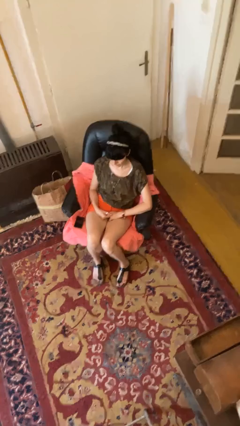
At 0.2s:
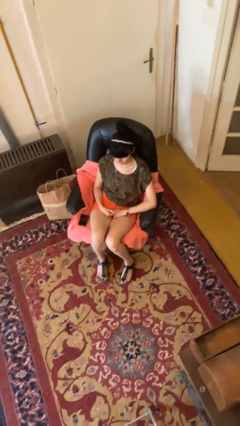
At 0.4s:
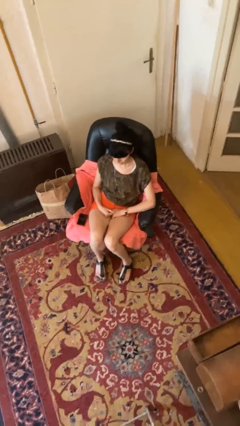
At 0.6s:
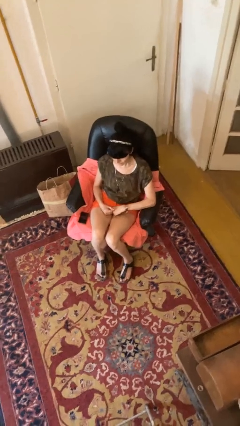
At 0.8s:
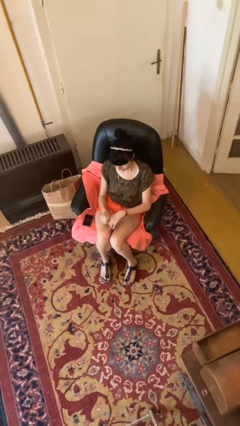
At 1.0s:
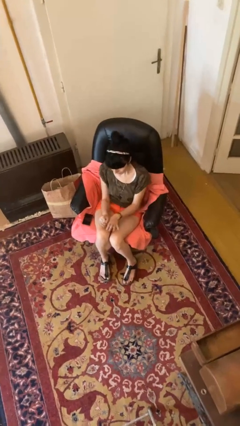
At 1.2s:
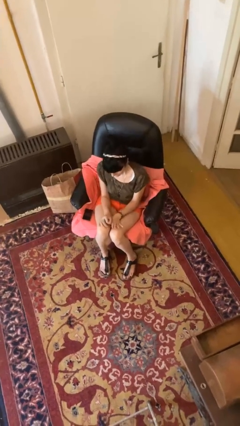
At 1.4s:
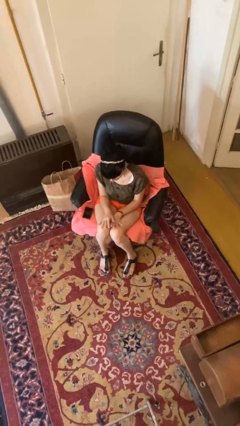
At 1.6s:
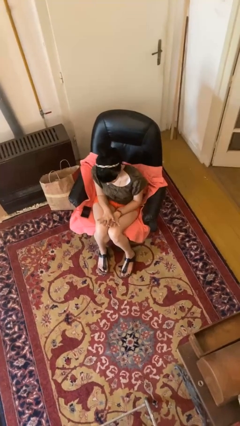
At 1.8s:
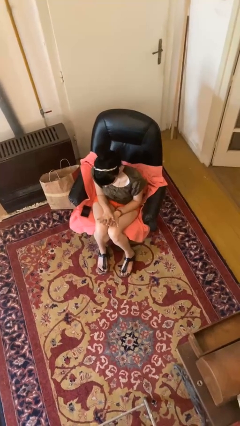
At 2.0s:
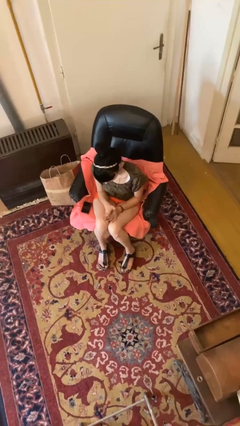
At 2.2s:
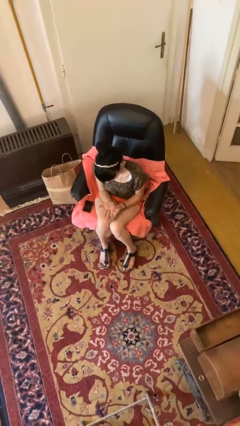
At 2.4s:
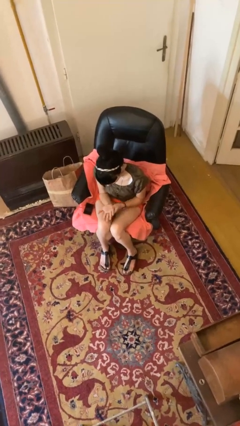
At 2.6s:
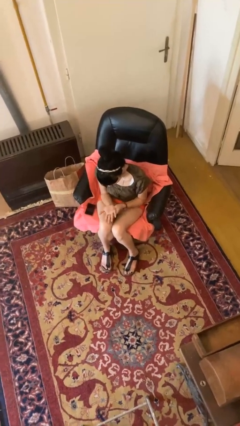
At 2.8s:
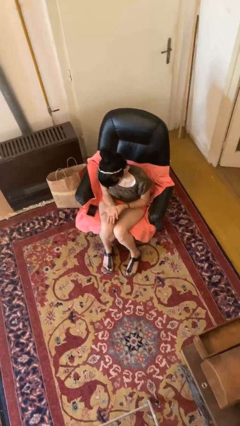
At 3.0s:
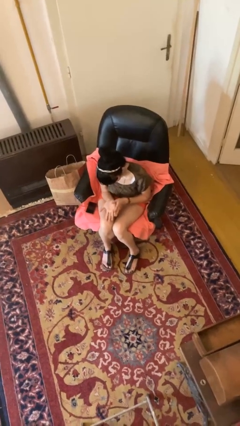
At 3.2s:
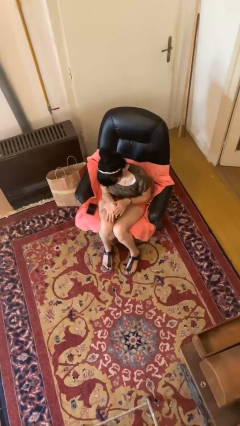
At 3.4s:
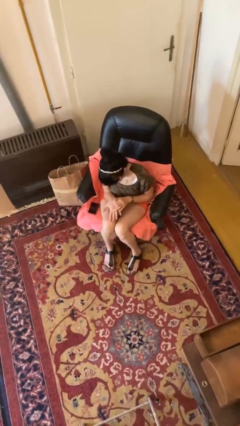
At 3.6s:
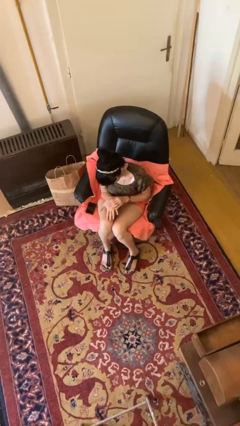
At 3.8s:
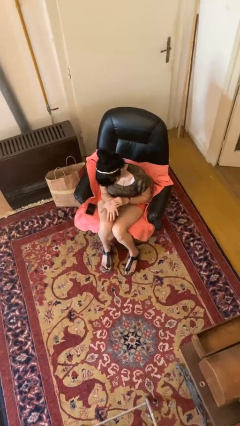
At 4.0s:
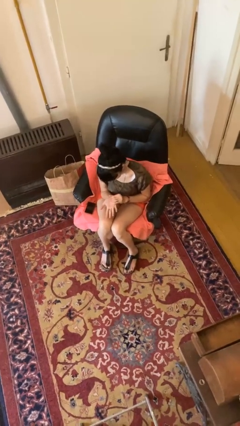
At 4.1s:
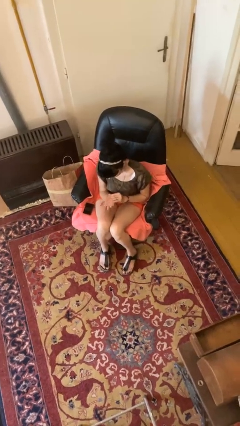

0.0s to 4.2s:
person looks at hands in lap

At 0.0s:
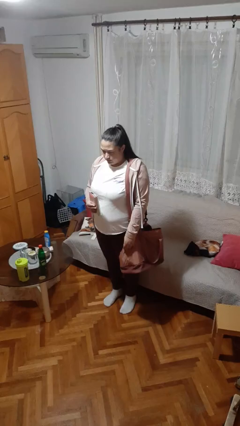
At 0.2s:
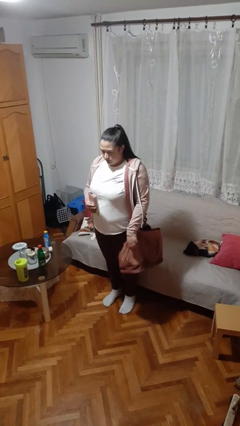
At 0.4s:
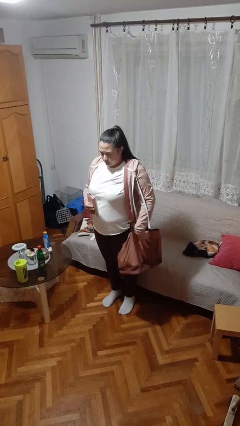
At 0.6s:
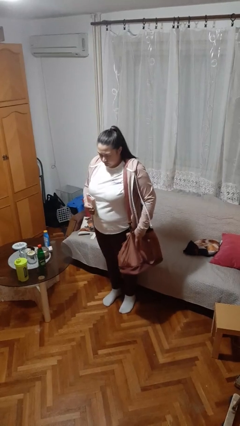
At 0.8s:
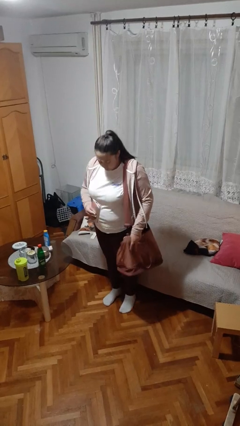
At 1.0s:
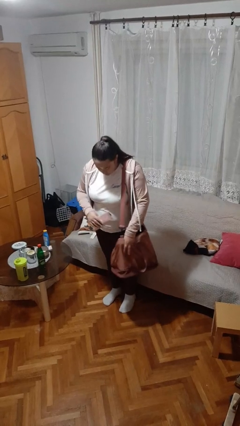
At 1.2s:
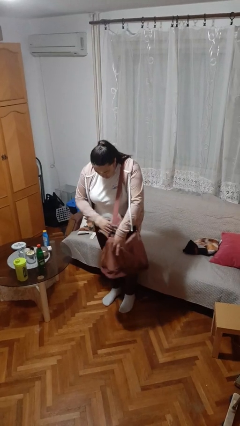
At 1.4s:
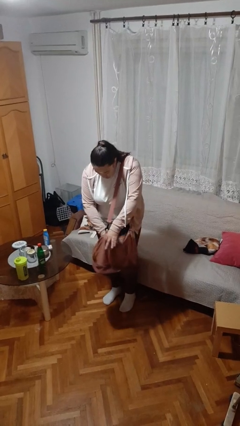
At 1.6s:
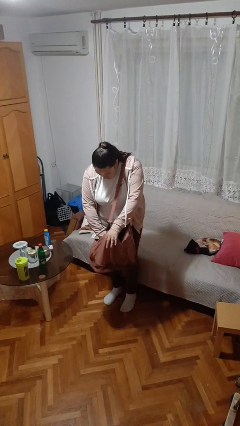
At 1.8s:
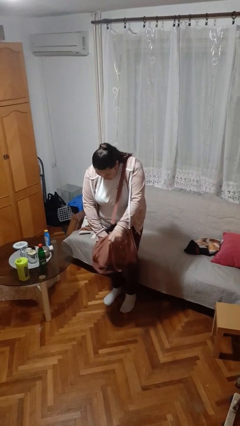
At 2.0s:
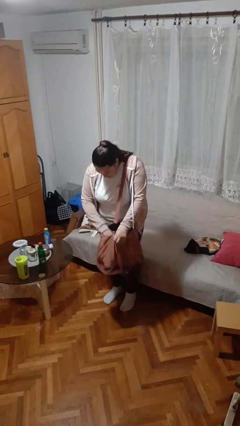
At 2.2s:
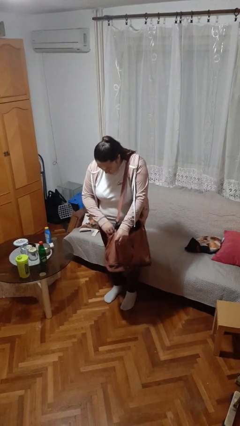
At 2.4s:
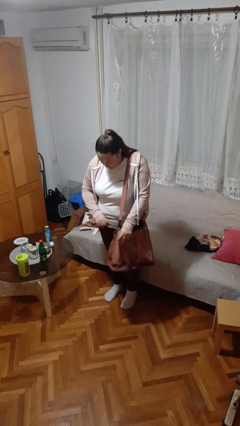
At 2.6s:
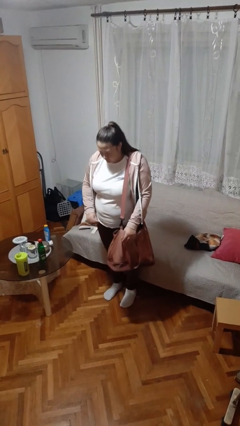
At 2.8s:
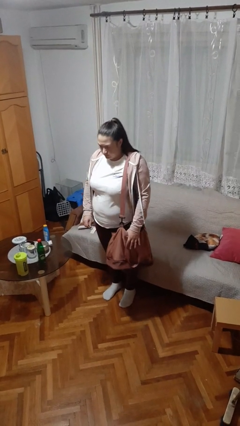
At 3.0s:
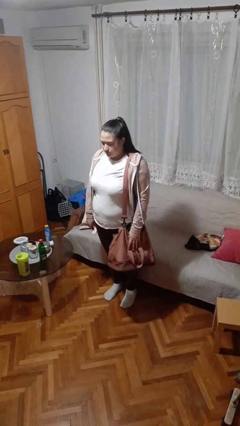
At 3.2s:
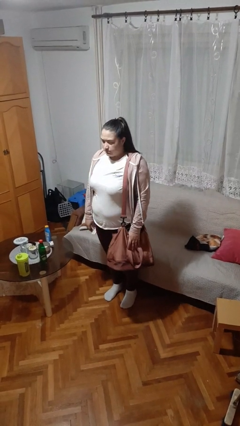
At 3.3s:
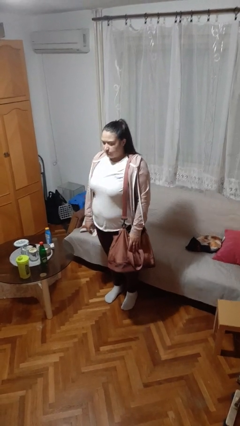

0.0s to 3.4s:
person puts object into purse

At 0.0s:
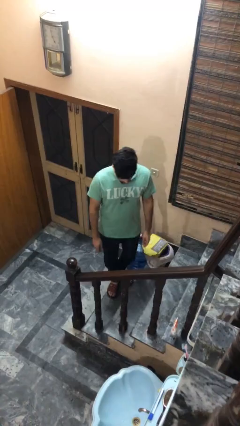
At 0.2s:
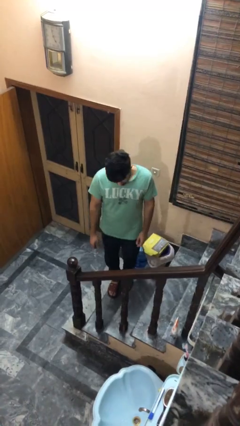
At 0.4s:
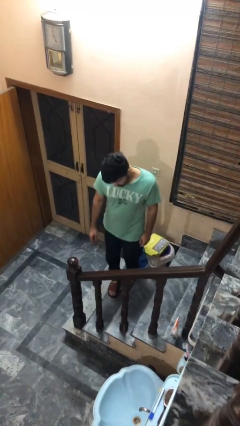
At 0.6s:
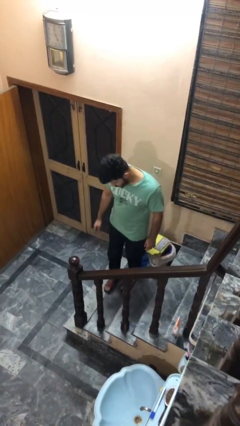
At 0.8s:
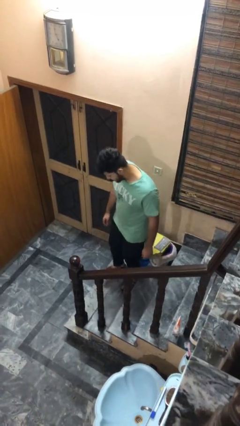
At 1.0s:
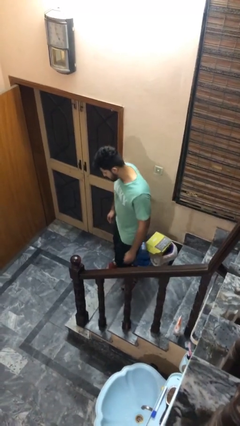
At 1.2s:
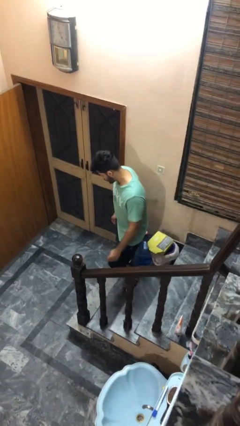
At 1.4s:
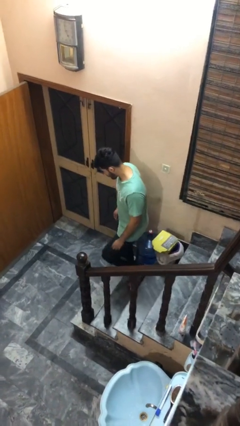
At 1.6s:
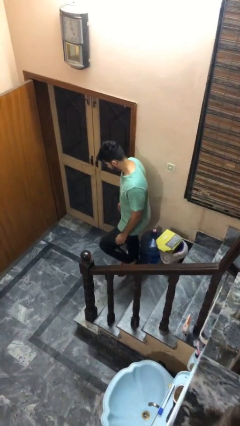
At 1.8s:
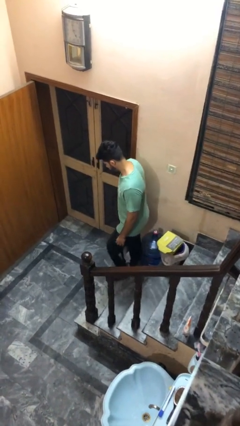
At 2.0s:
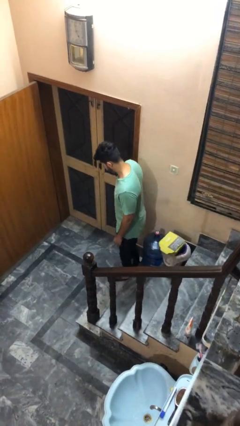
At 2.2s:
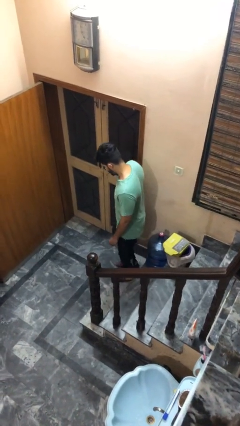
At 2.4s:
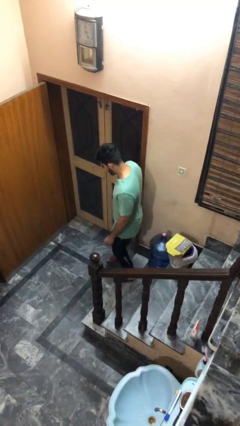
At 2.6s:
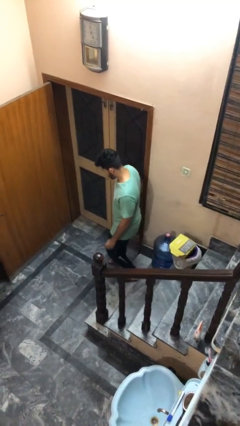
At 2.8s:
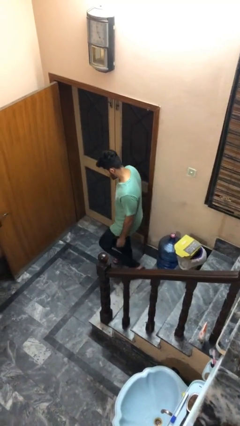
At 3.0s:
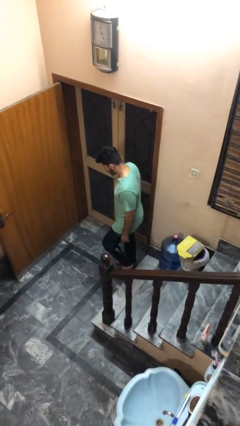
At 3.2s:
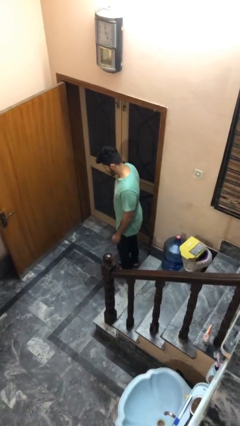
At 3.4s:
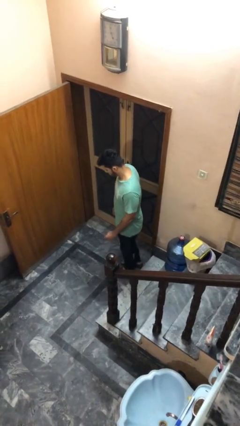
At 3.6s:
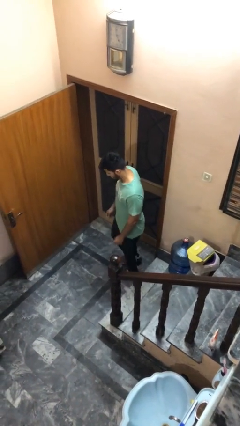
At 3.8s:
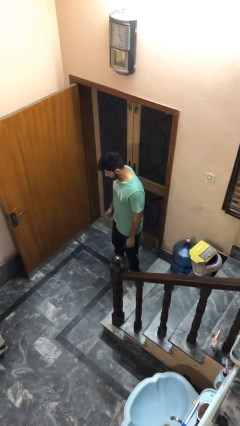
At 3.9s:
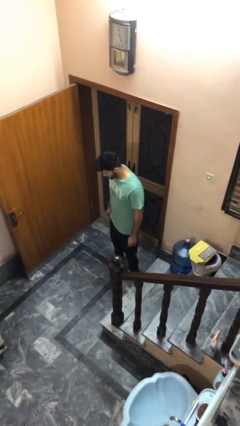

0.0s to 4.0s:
person climbs down stairs

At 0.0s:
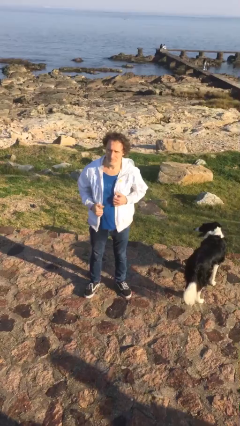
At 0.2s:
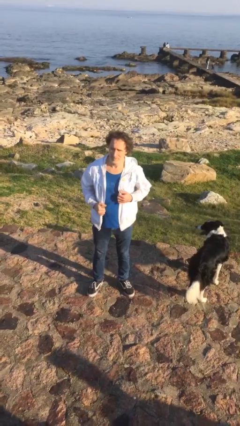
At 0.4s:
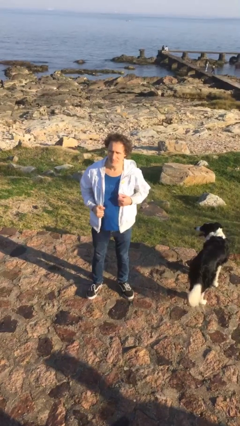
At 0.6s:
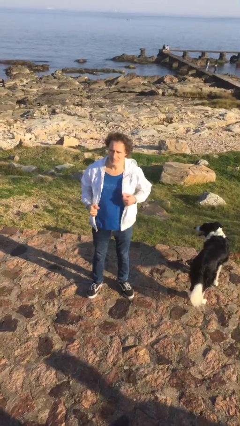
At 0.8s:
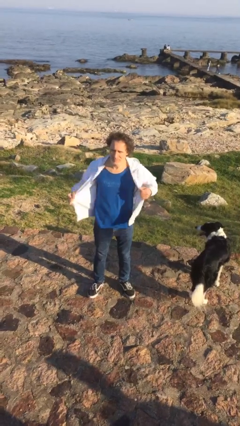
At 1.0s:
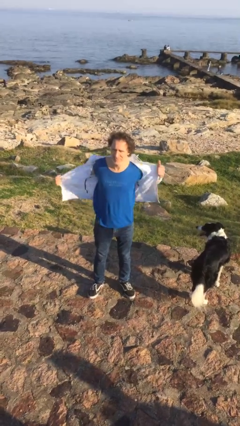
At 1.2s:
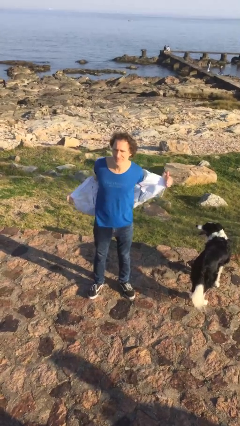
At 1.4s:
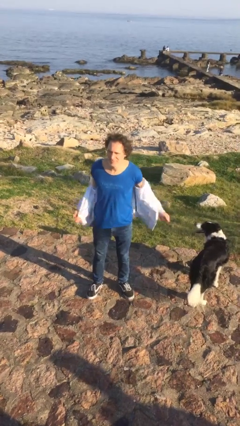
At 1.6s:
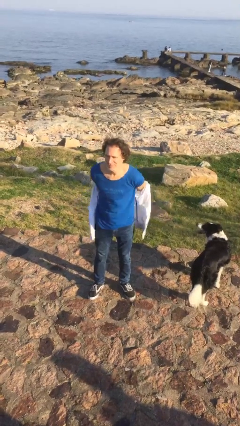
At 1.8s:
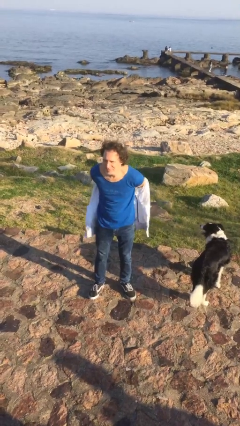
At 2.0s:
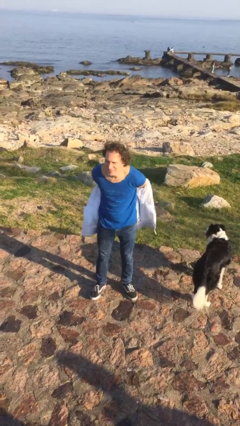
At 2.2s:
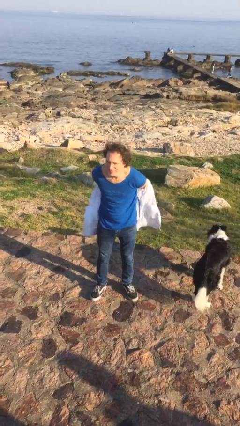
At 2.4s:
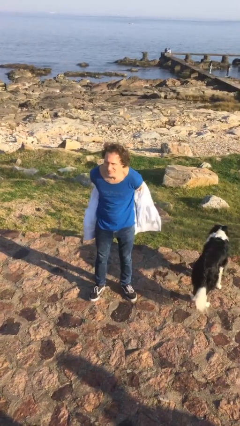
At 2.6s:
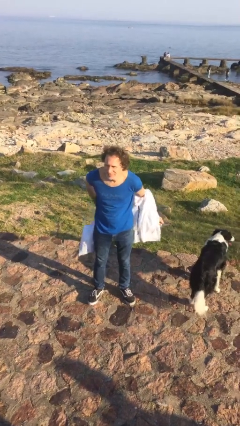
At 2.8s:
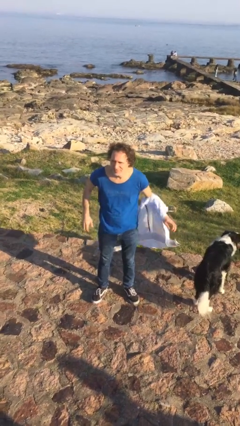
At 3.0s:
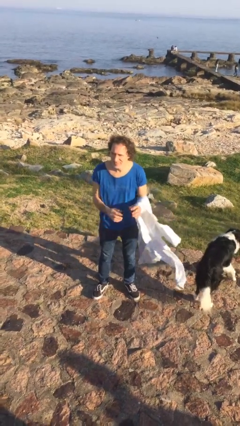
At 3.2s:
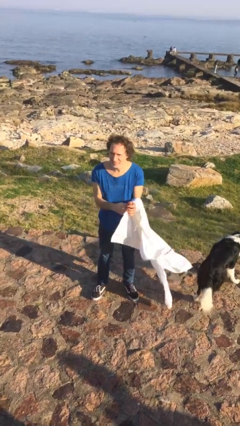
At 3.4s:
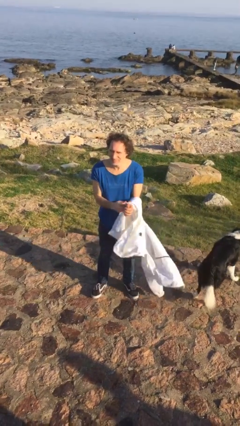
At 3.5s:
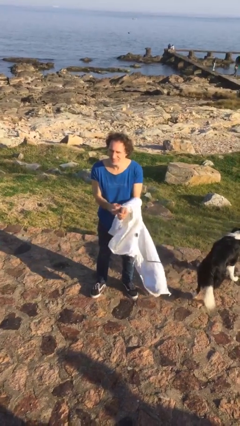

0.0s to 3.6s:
person takes off jacket

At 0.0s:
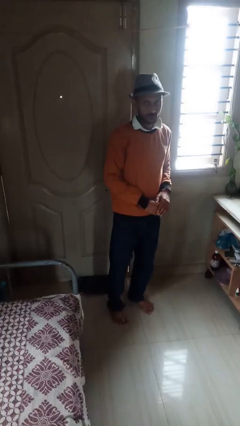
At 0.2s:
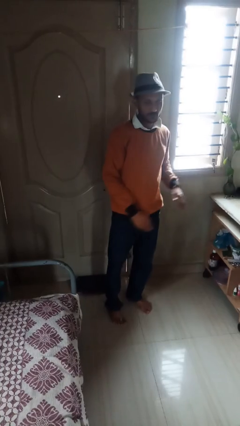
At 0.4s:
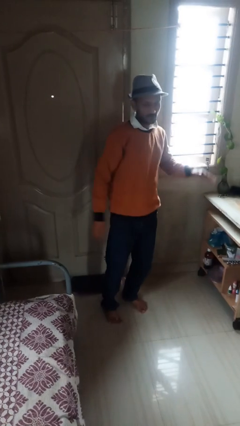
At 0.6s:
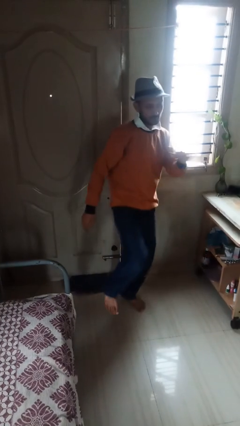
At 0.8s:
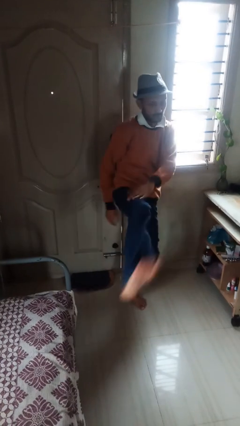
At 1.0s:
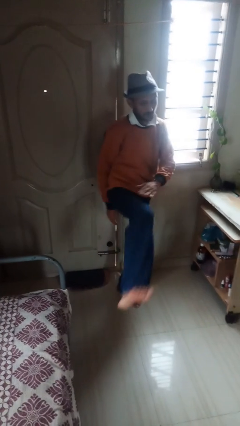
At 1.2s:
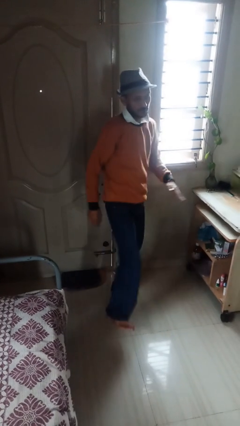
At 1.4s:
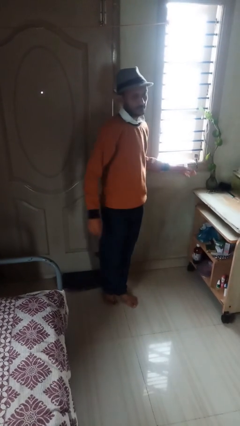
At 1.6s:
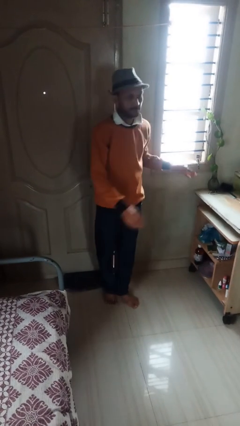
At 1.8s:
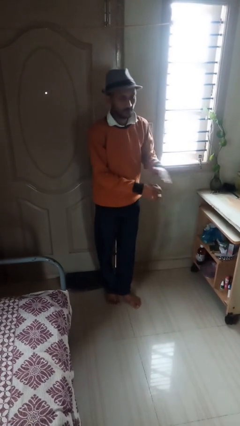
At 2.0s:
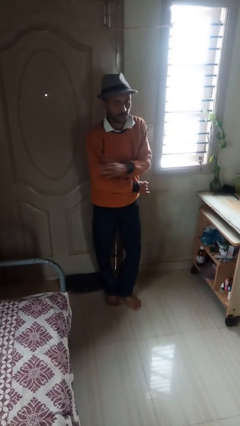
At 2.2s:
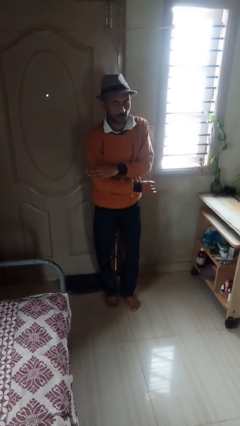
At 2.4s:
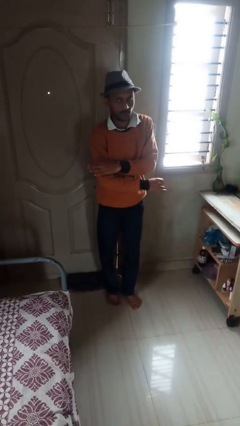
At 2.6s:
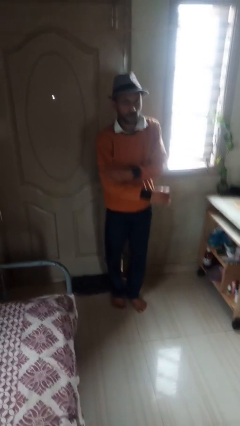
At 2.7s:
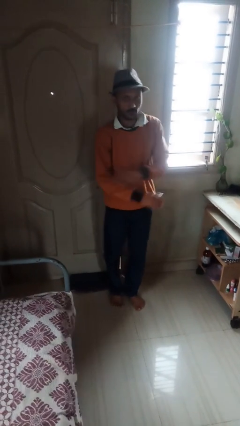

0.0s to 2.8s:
person karate kicks
